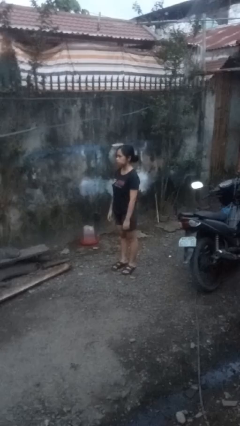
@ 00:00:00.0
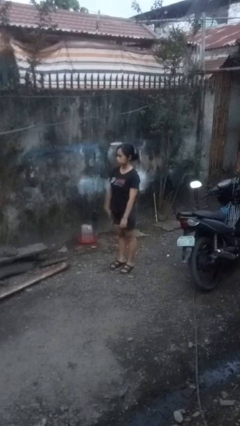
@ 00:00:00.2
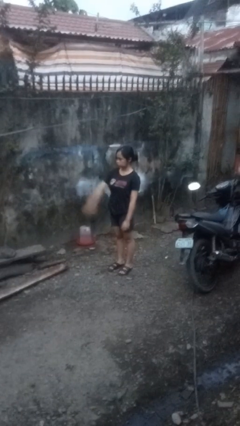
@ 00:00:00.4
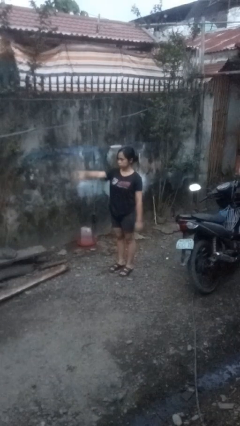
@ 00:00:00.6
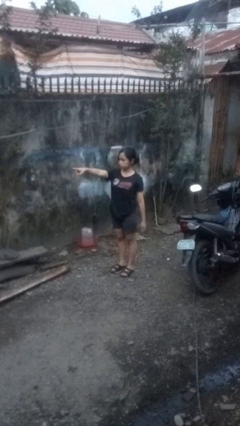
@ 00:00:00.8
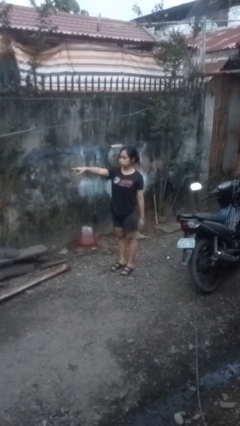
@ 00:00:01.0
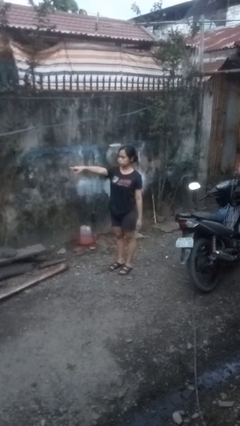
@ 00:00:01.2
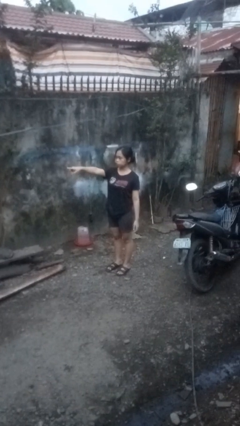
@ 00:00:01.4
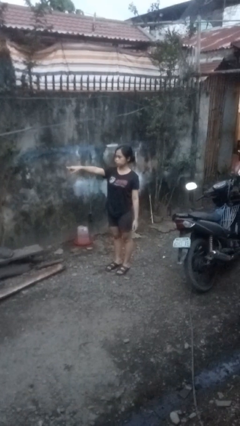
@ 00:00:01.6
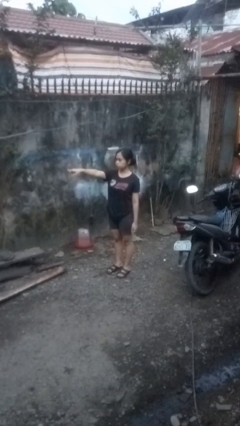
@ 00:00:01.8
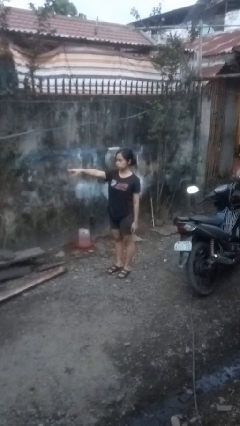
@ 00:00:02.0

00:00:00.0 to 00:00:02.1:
person points at person

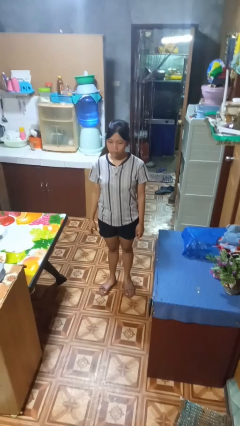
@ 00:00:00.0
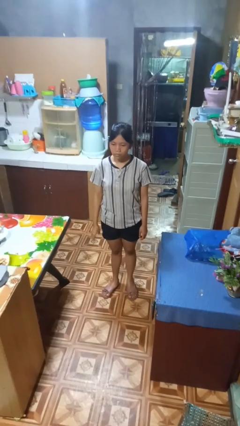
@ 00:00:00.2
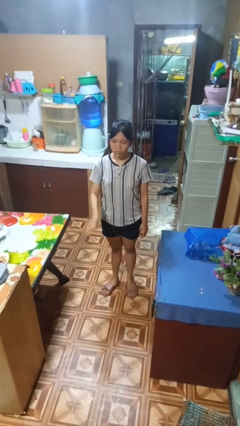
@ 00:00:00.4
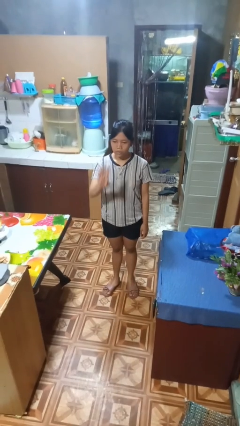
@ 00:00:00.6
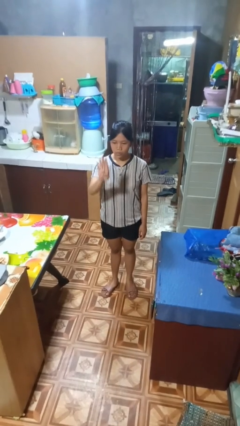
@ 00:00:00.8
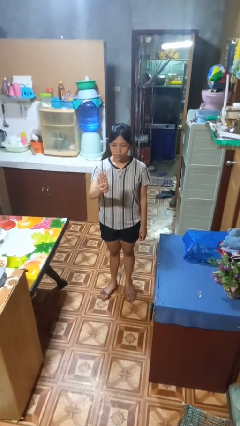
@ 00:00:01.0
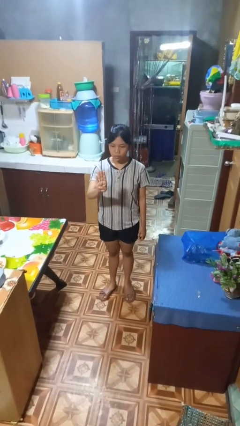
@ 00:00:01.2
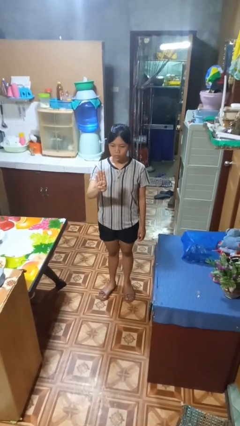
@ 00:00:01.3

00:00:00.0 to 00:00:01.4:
person gestures number four

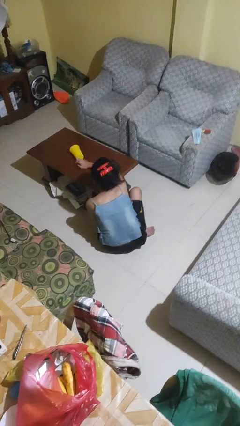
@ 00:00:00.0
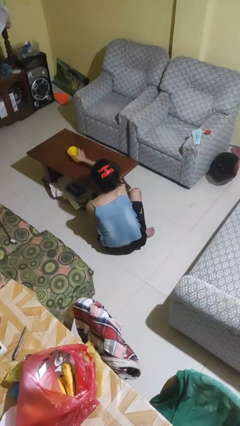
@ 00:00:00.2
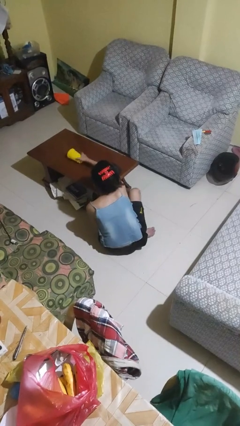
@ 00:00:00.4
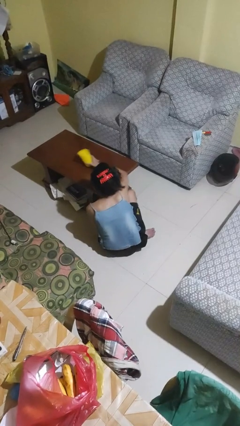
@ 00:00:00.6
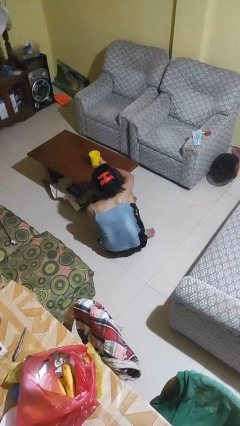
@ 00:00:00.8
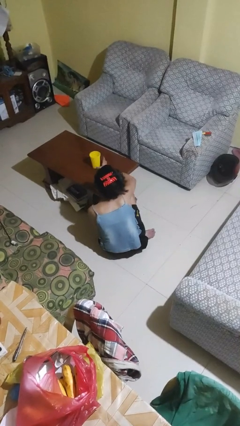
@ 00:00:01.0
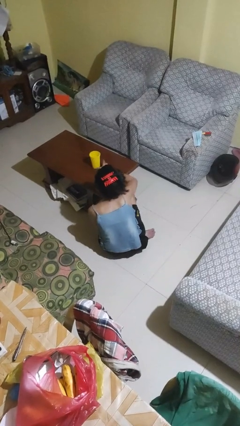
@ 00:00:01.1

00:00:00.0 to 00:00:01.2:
person sets upright glass

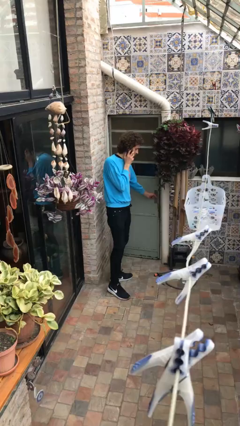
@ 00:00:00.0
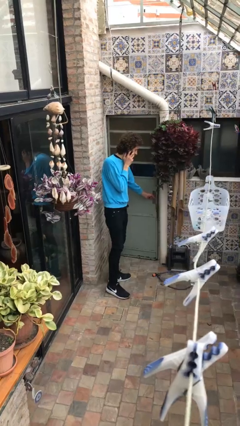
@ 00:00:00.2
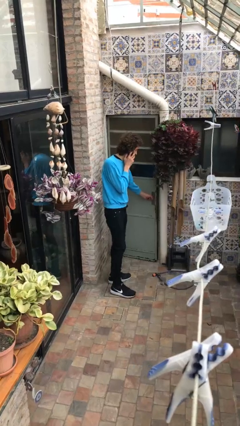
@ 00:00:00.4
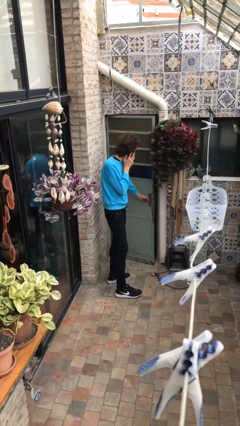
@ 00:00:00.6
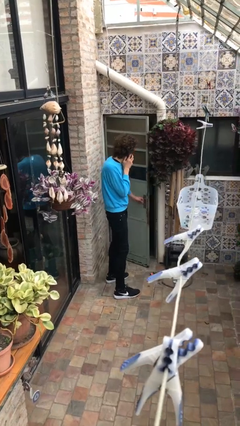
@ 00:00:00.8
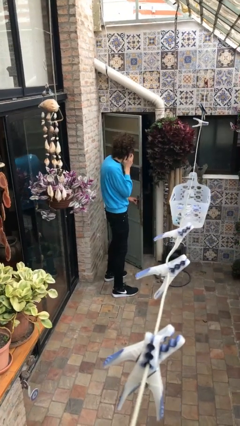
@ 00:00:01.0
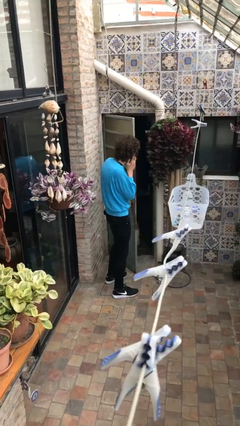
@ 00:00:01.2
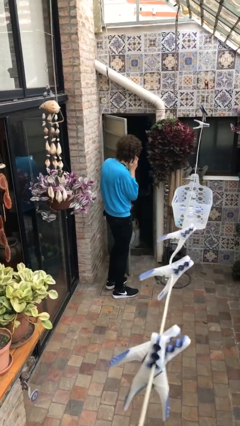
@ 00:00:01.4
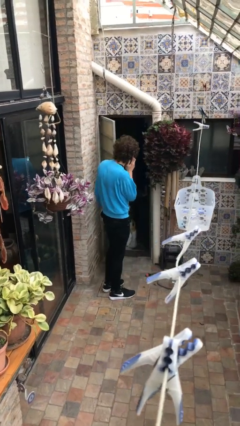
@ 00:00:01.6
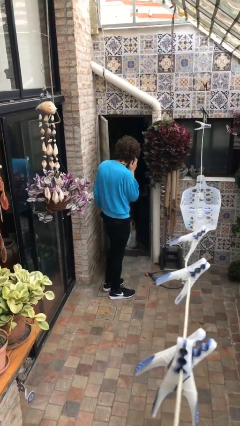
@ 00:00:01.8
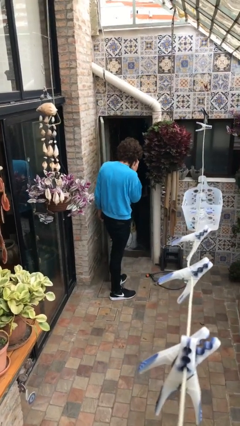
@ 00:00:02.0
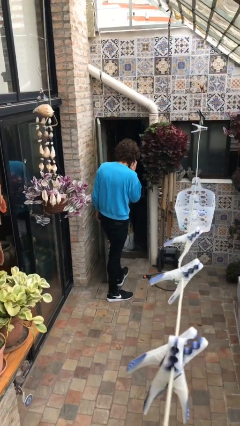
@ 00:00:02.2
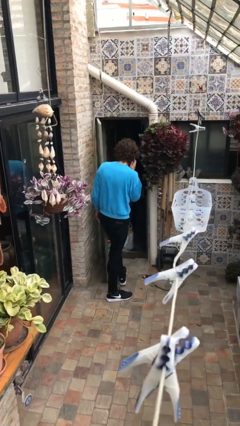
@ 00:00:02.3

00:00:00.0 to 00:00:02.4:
person opens facility door

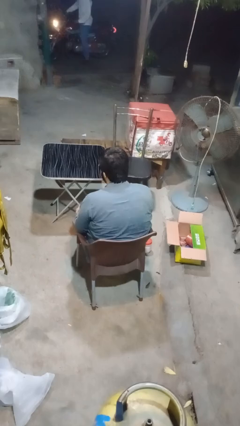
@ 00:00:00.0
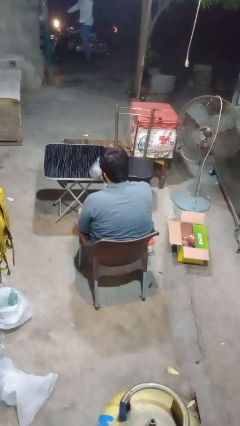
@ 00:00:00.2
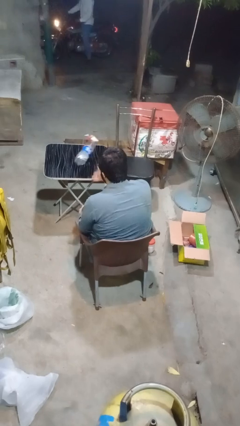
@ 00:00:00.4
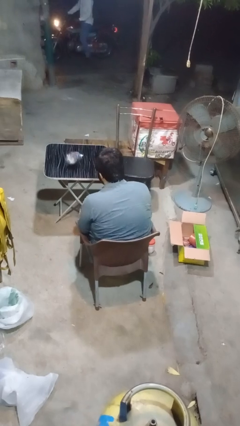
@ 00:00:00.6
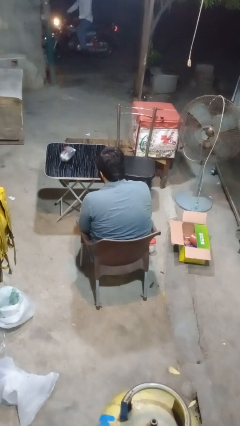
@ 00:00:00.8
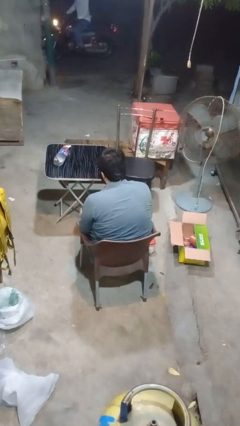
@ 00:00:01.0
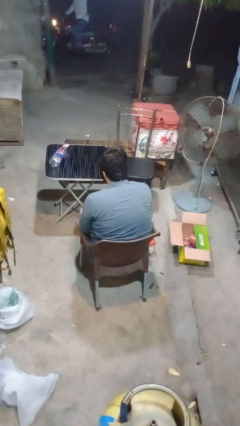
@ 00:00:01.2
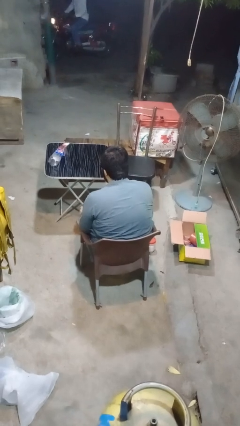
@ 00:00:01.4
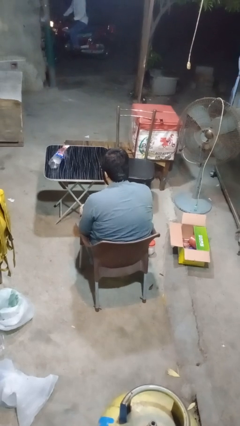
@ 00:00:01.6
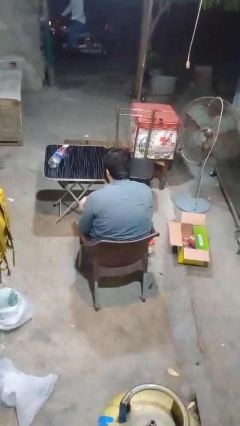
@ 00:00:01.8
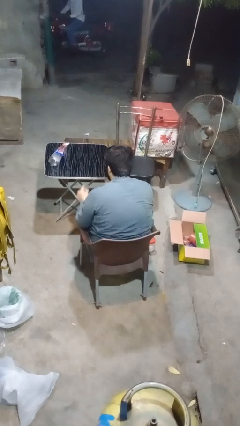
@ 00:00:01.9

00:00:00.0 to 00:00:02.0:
person throws object on table

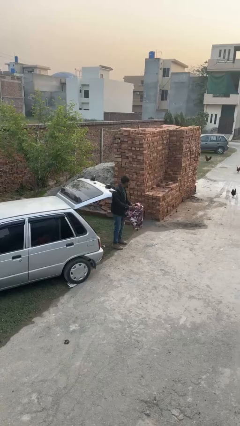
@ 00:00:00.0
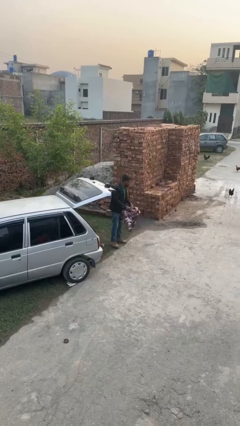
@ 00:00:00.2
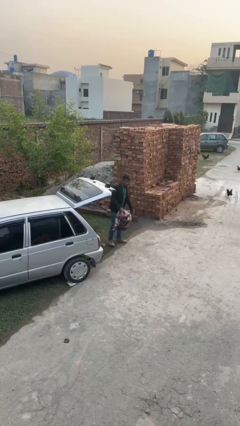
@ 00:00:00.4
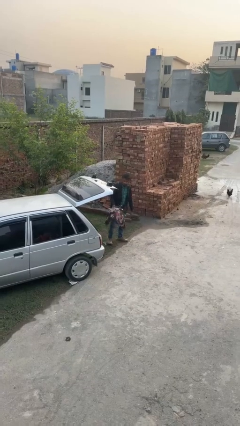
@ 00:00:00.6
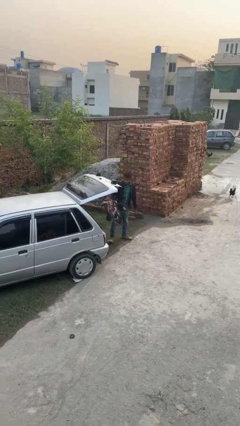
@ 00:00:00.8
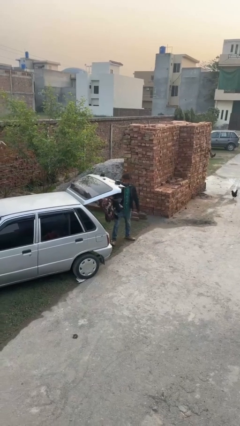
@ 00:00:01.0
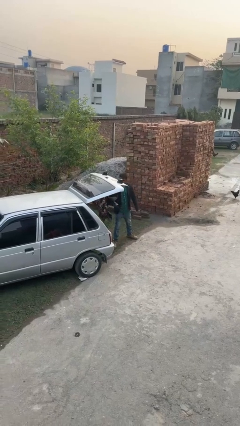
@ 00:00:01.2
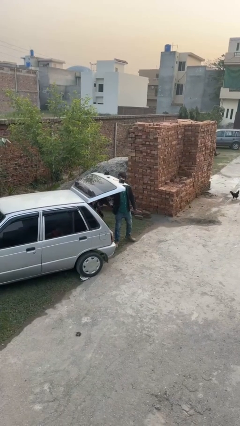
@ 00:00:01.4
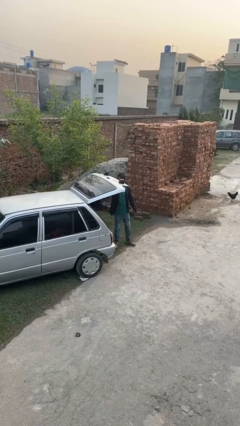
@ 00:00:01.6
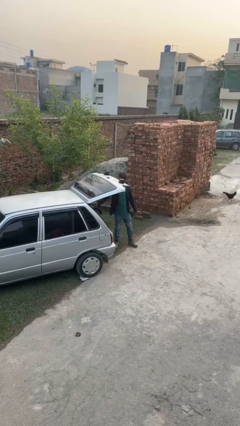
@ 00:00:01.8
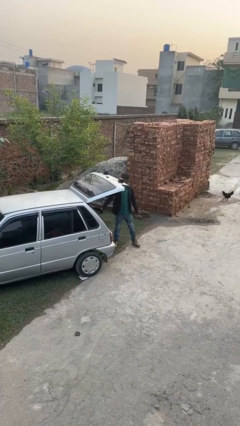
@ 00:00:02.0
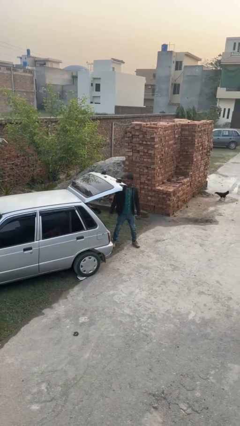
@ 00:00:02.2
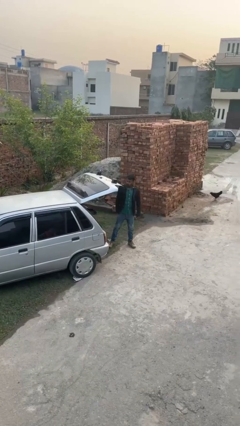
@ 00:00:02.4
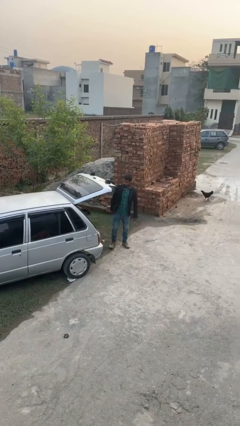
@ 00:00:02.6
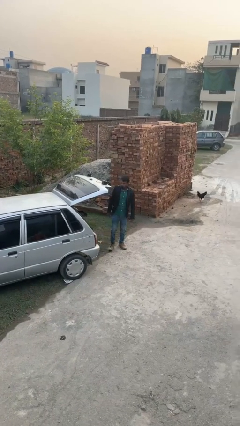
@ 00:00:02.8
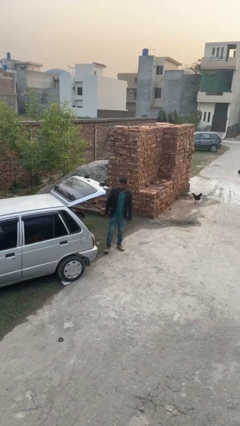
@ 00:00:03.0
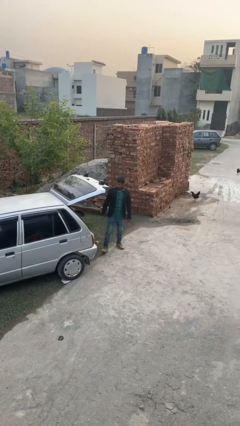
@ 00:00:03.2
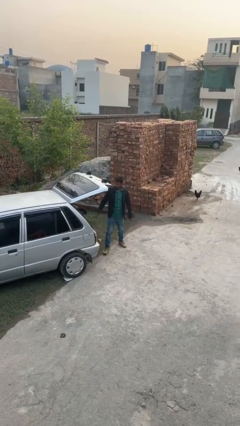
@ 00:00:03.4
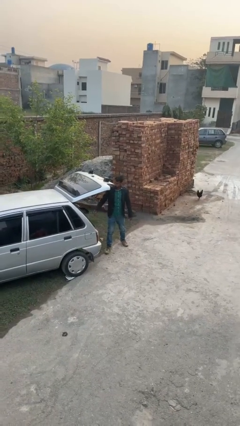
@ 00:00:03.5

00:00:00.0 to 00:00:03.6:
person loads car

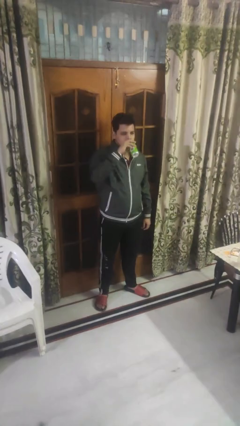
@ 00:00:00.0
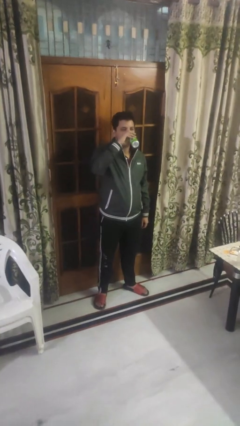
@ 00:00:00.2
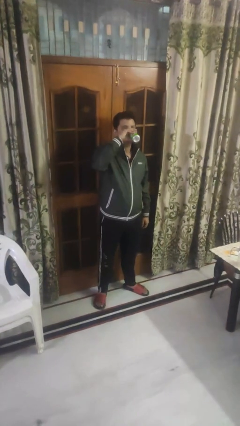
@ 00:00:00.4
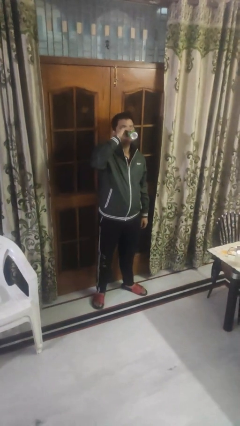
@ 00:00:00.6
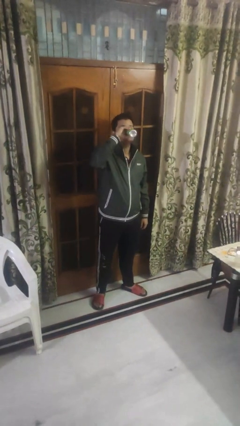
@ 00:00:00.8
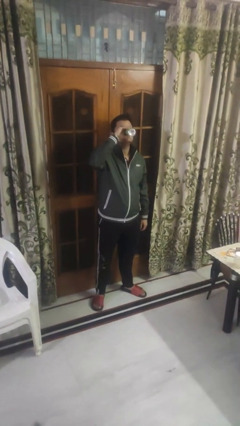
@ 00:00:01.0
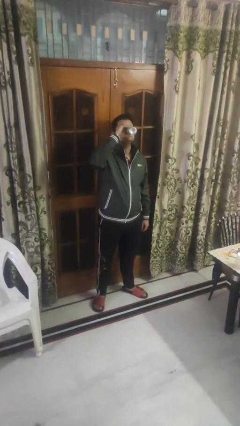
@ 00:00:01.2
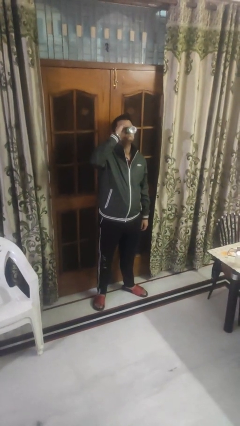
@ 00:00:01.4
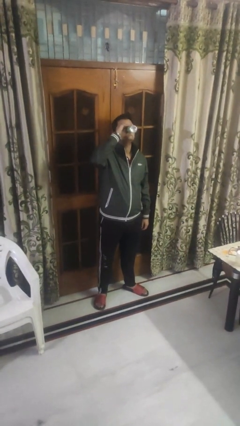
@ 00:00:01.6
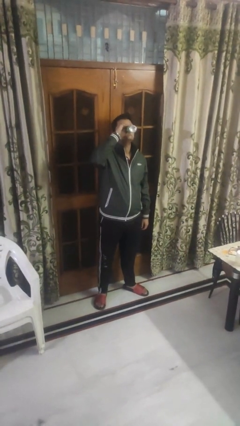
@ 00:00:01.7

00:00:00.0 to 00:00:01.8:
person drinks from beverage can

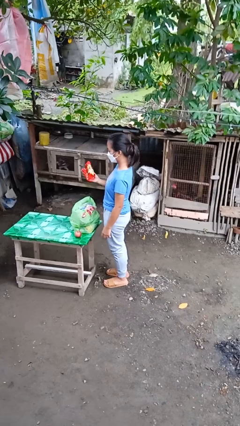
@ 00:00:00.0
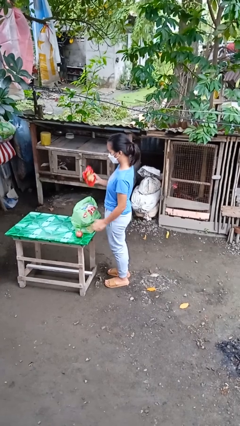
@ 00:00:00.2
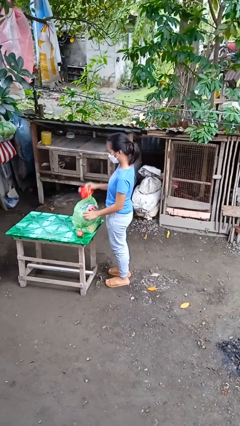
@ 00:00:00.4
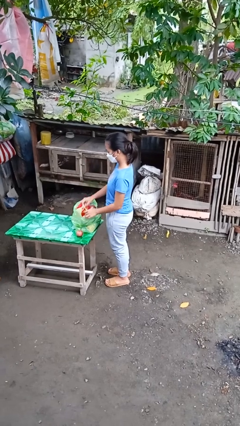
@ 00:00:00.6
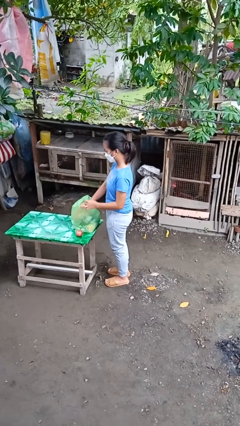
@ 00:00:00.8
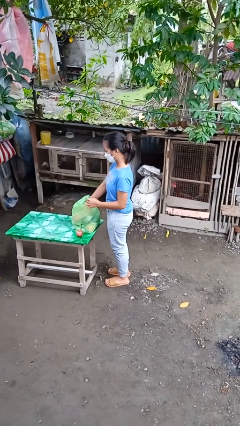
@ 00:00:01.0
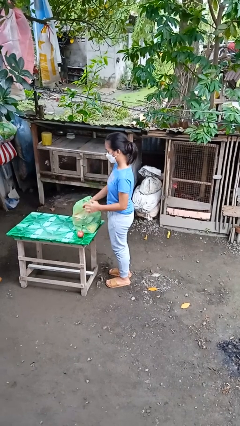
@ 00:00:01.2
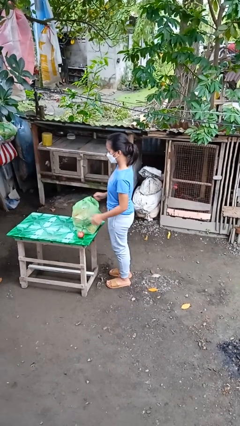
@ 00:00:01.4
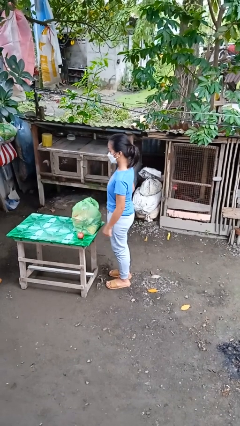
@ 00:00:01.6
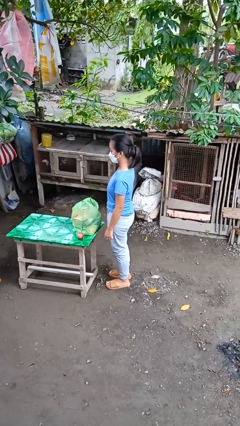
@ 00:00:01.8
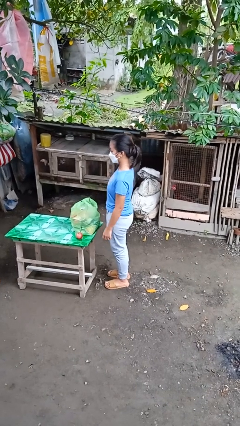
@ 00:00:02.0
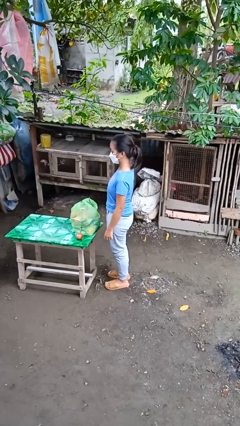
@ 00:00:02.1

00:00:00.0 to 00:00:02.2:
person puts object into bag
